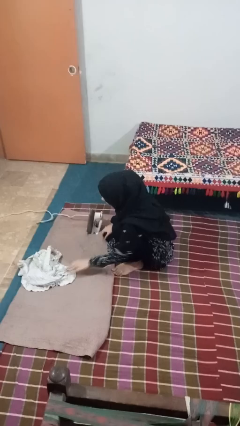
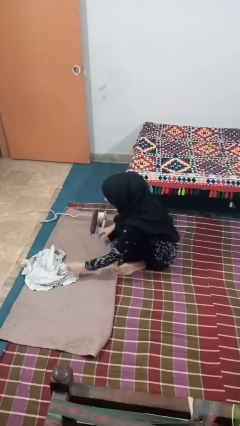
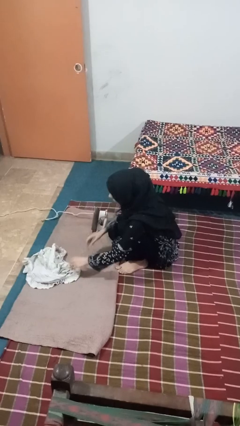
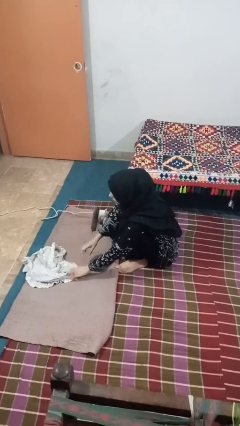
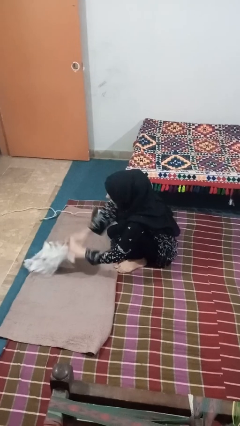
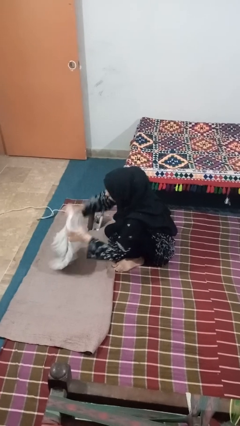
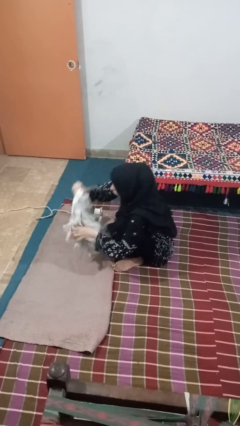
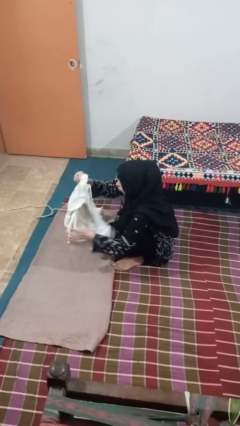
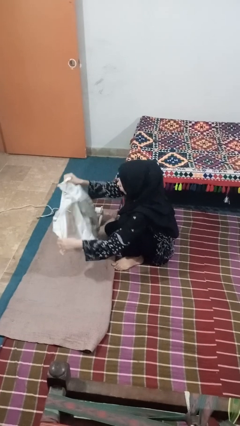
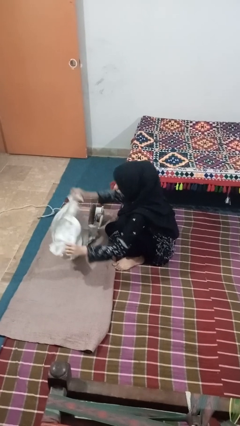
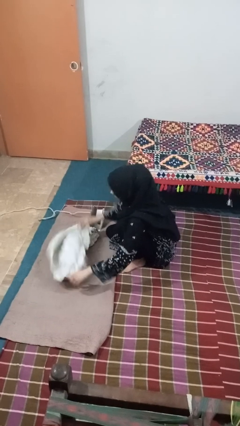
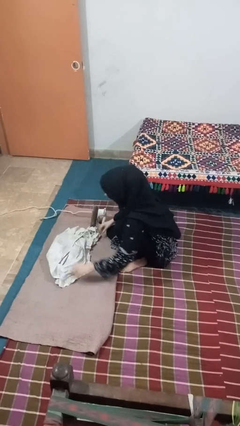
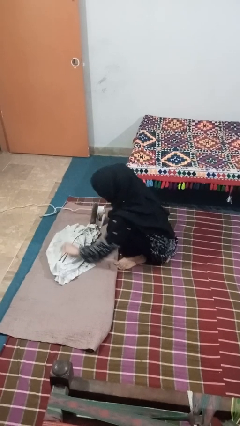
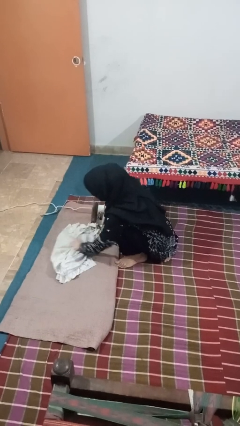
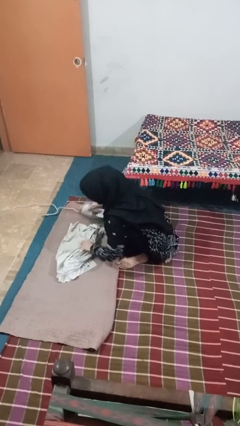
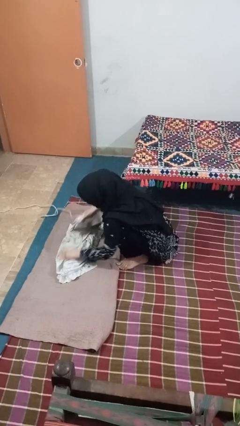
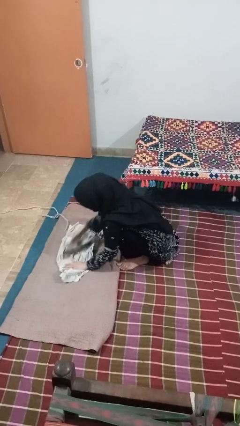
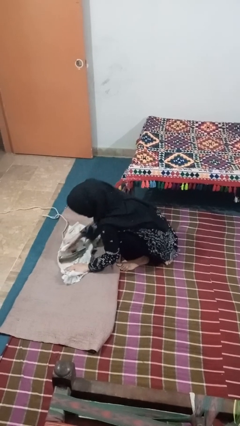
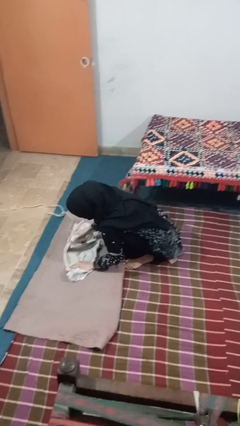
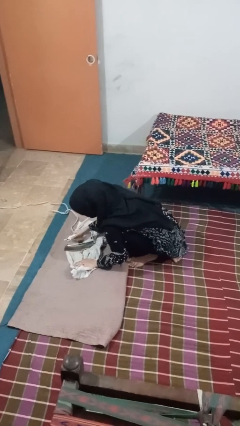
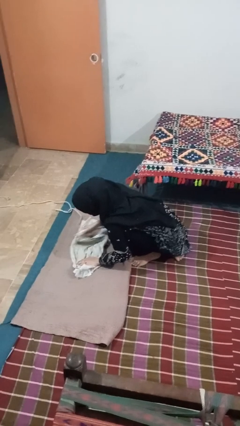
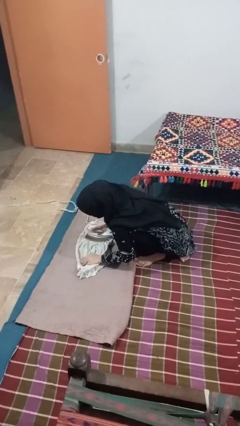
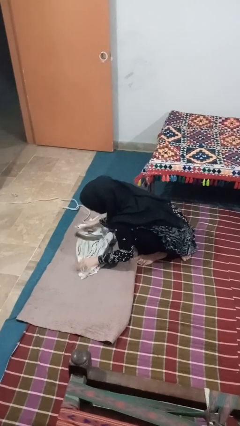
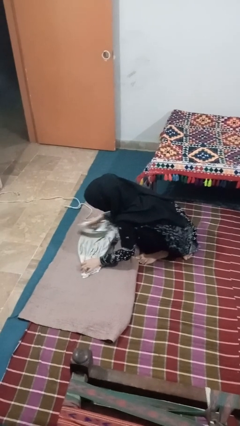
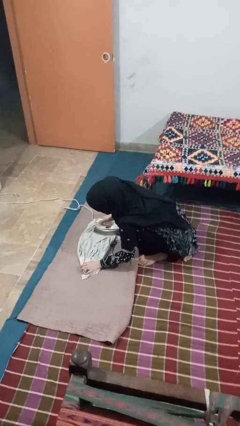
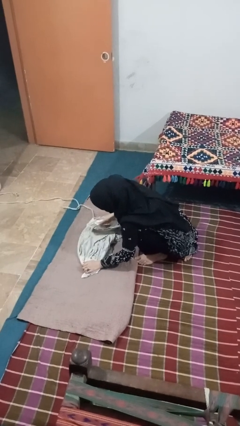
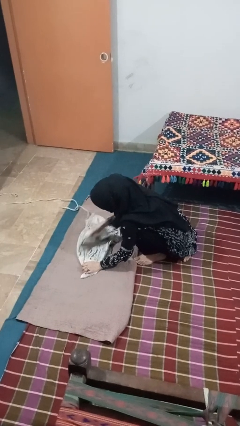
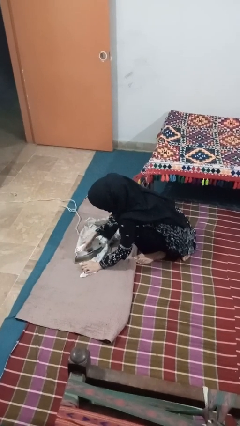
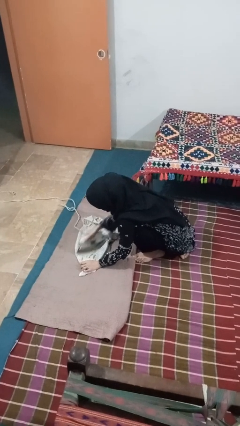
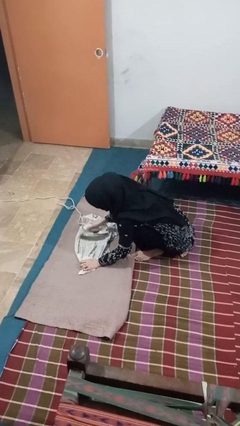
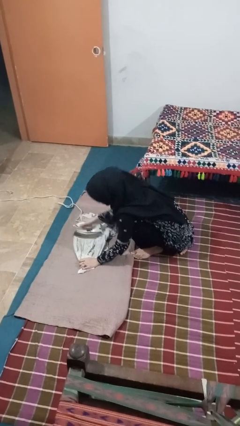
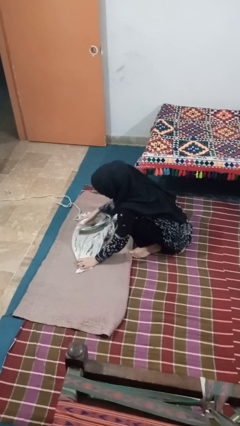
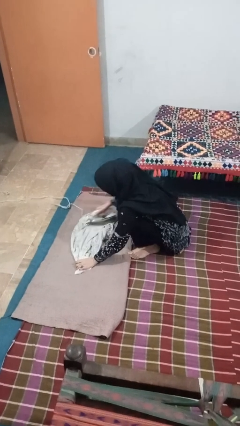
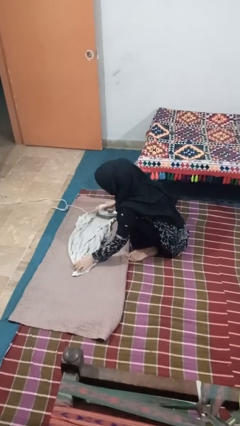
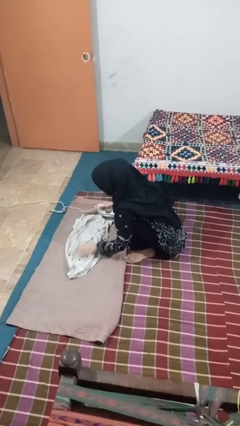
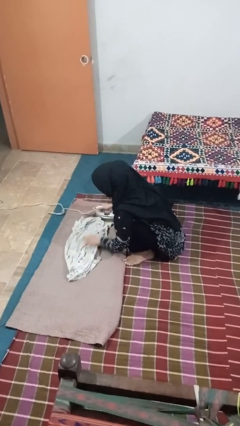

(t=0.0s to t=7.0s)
person irons clothes

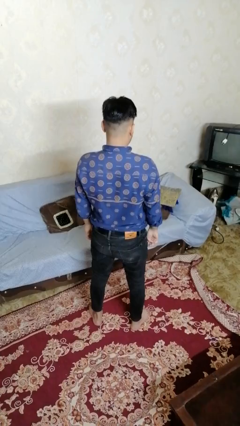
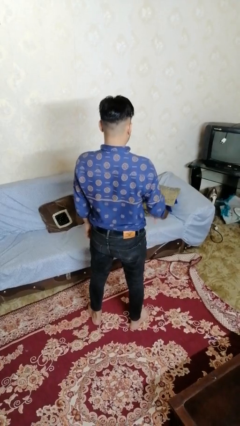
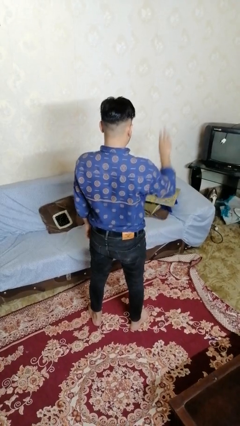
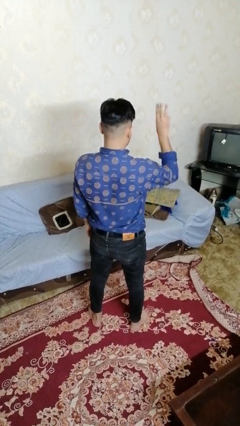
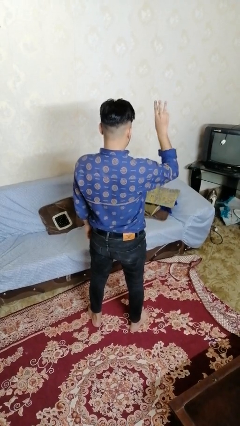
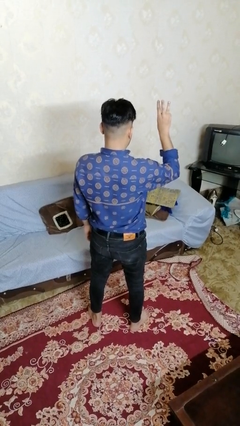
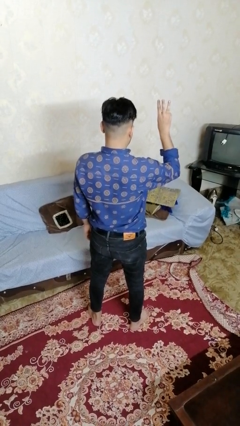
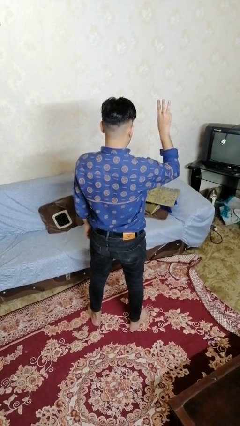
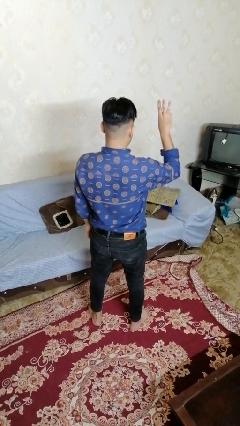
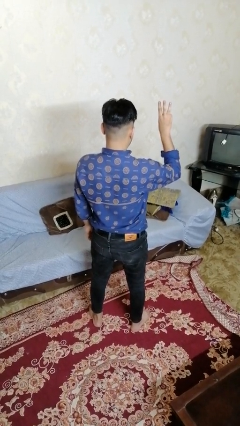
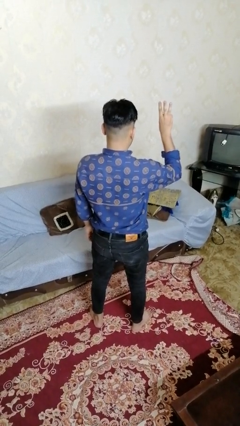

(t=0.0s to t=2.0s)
person gestures number three

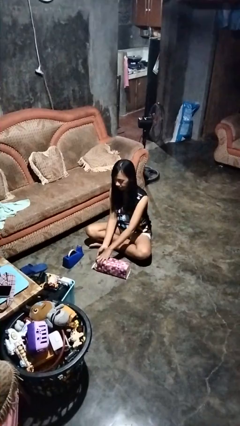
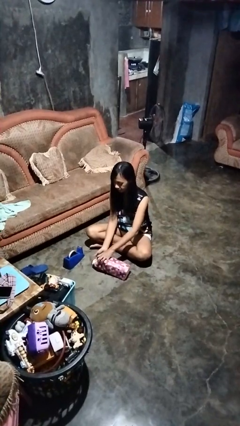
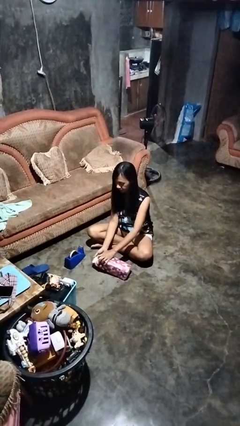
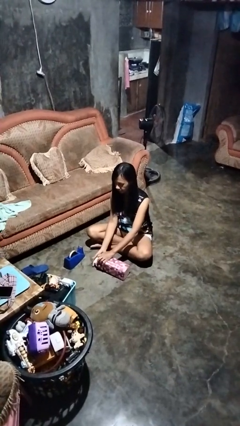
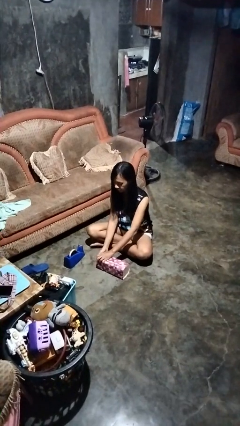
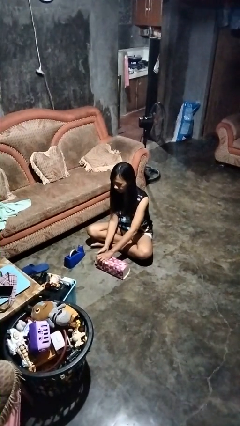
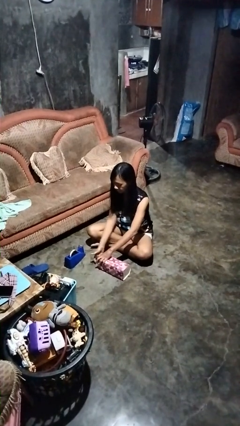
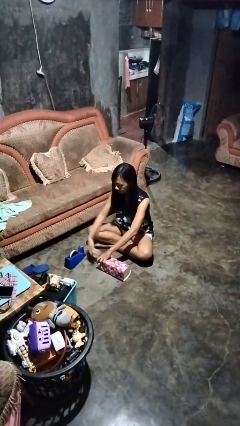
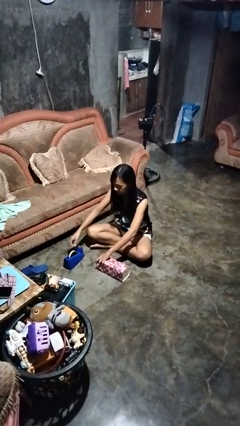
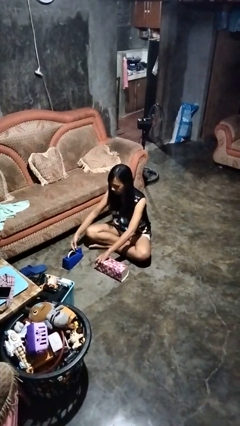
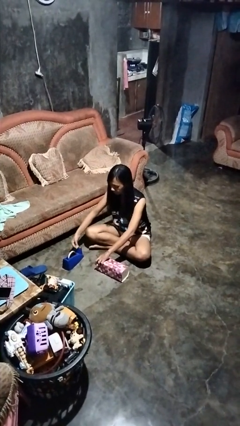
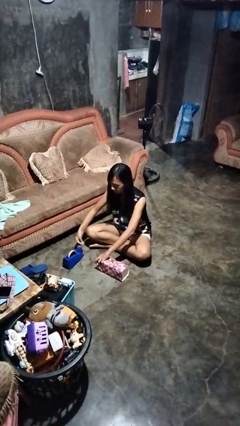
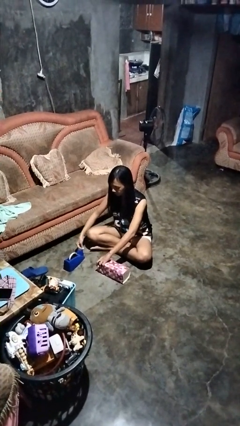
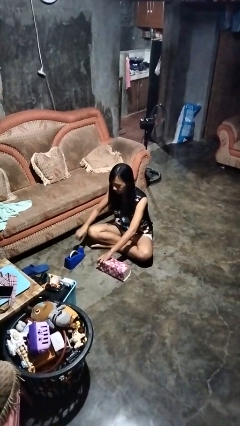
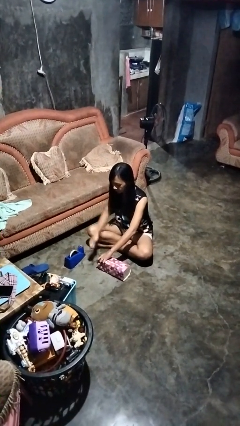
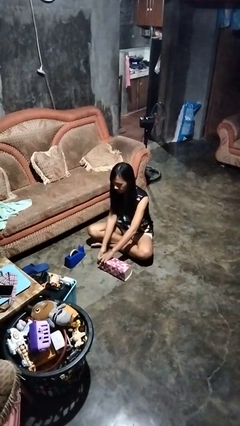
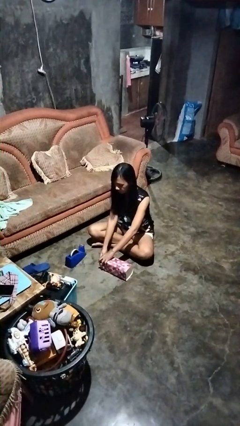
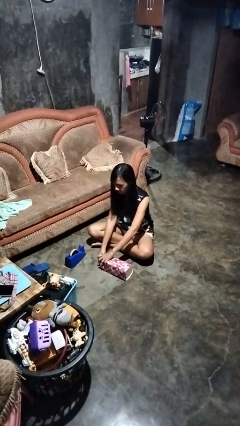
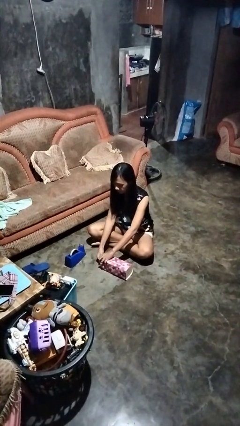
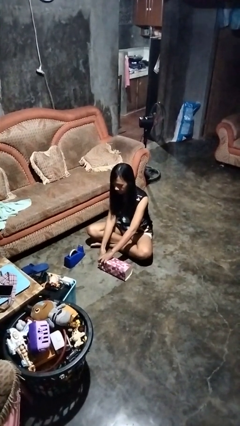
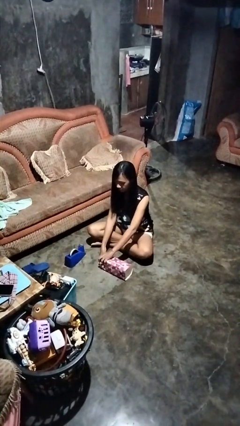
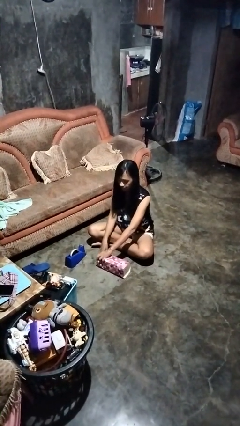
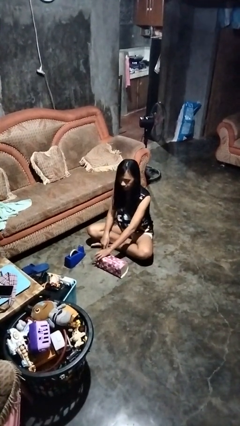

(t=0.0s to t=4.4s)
person wraps box

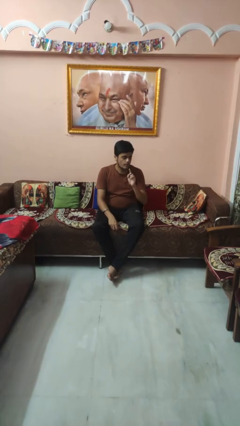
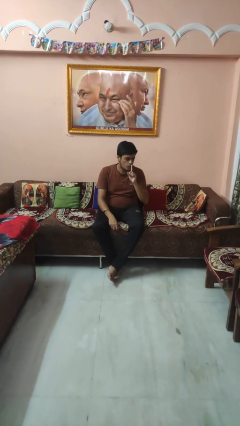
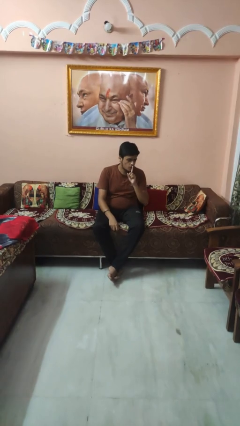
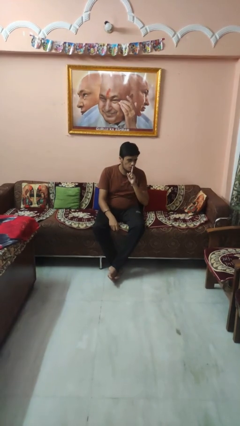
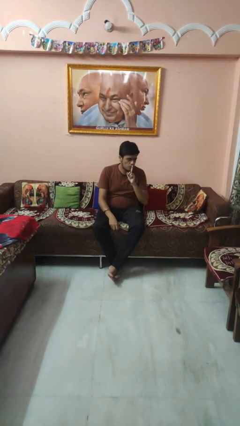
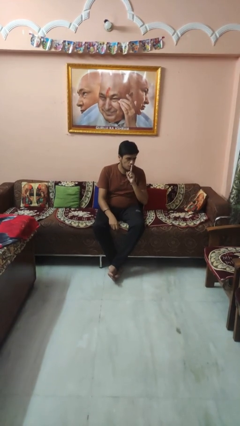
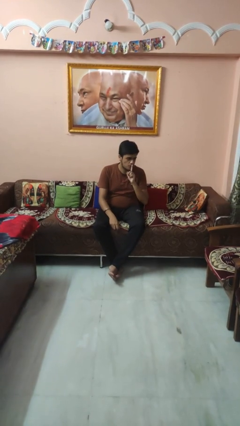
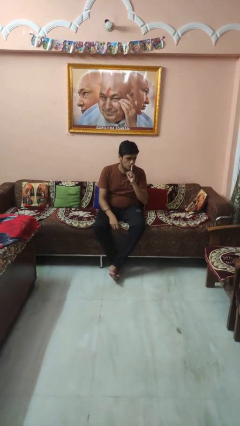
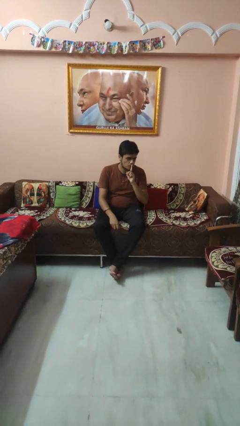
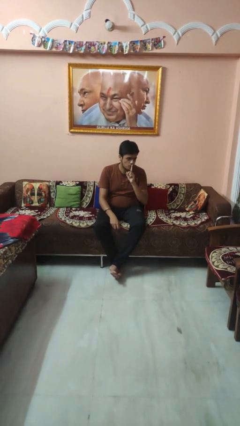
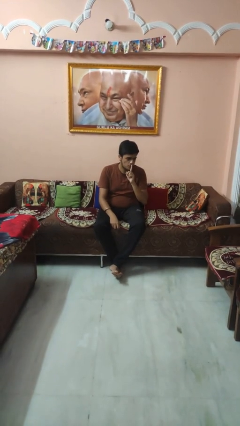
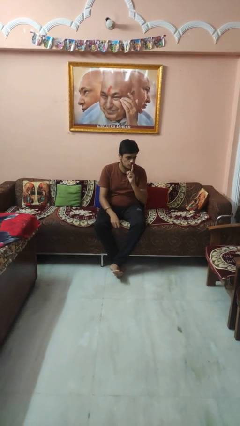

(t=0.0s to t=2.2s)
person gestures be quiet

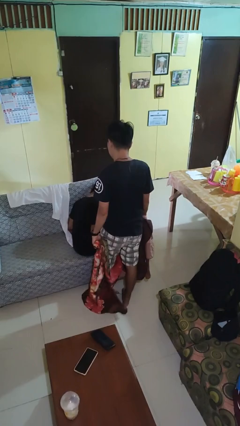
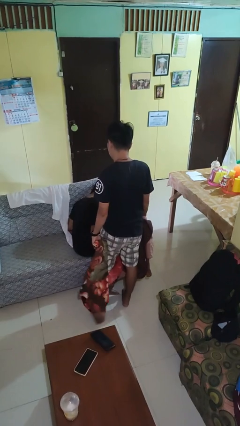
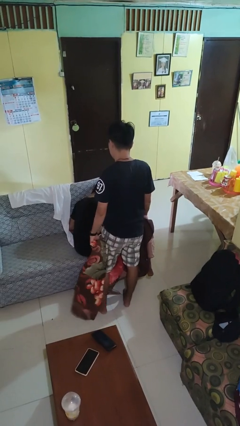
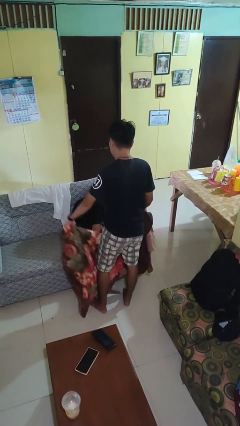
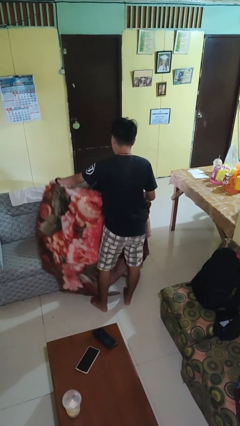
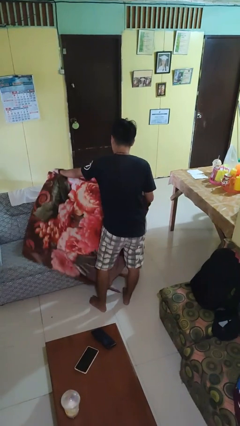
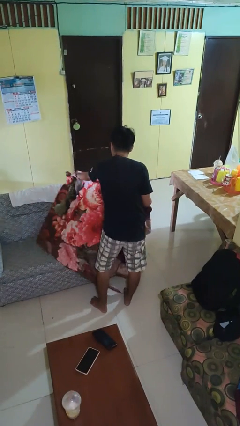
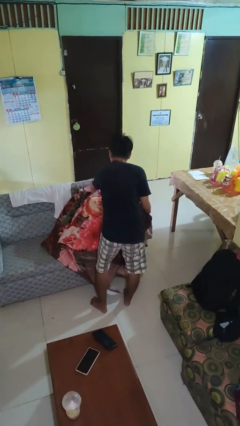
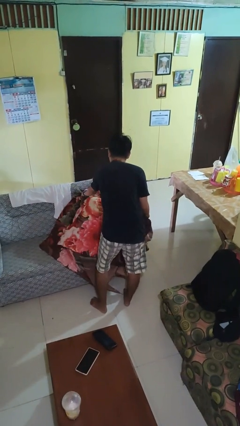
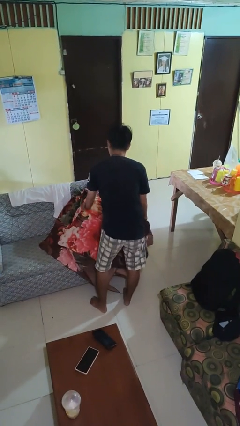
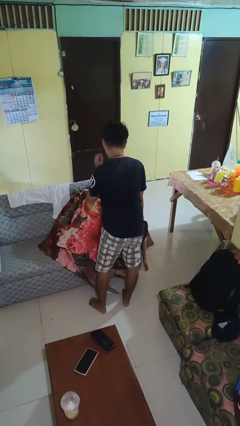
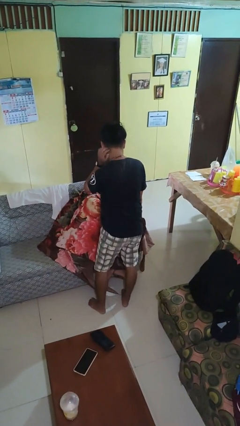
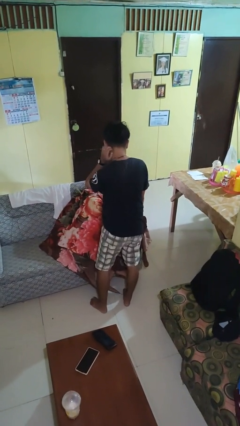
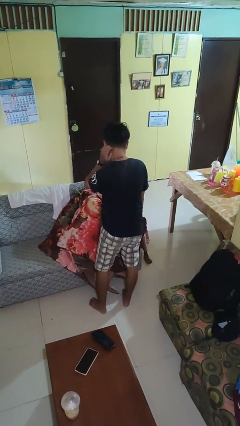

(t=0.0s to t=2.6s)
person covers friend with blanket
